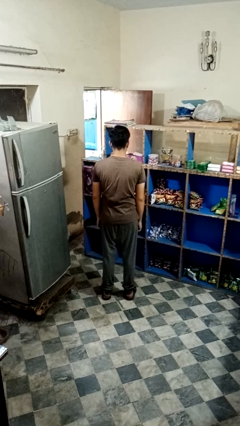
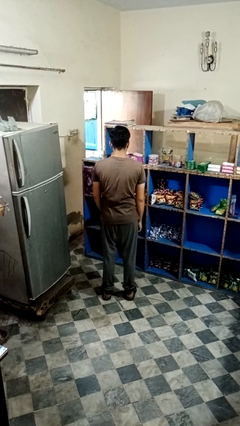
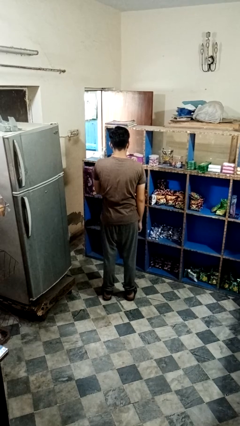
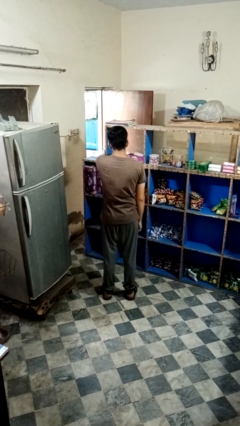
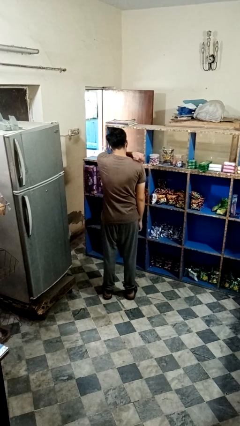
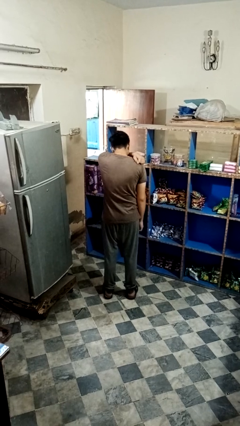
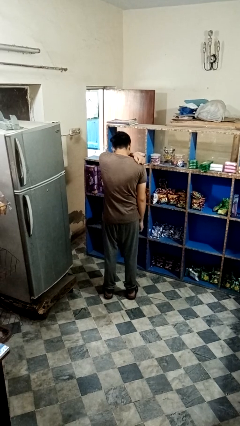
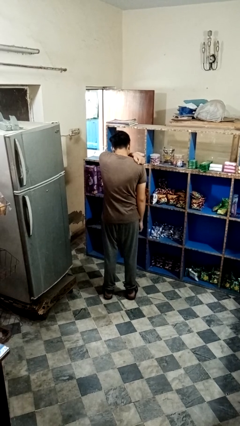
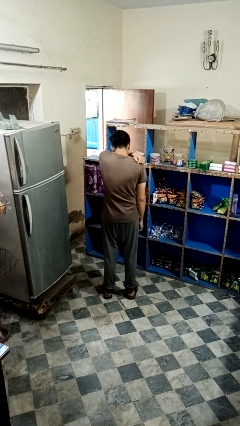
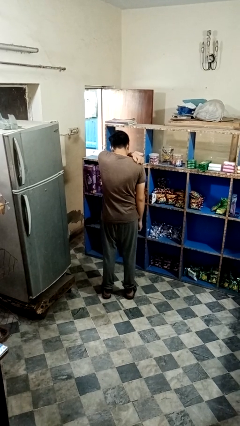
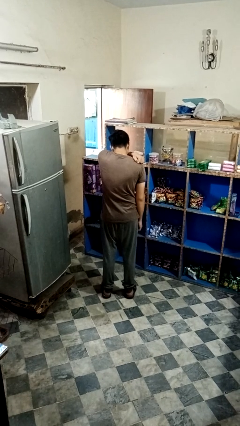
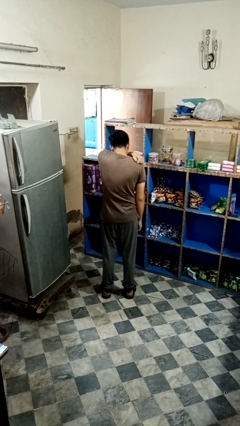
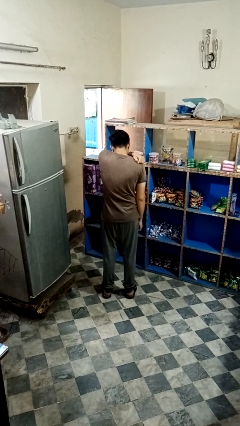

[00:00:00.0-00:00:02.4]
person sneezes into arm

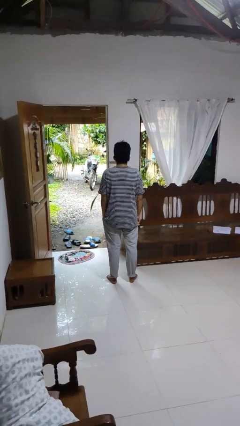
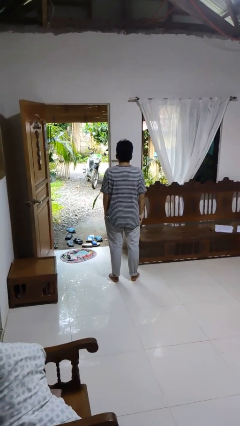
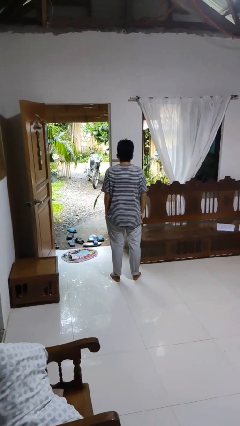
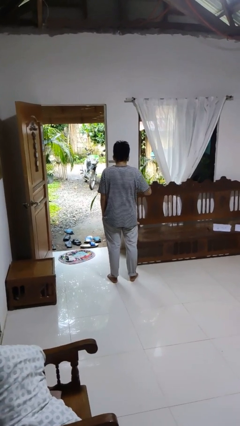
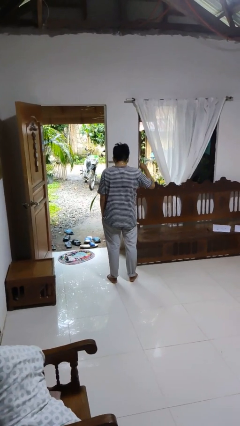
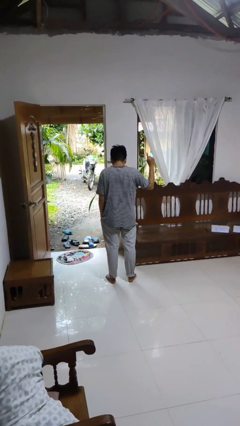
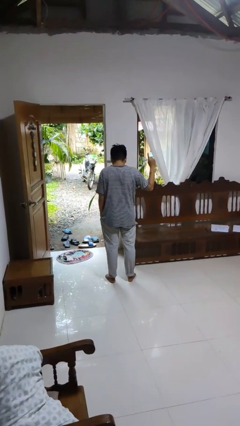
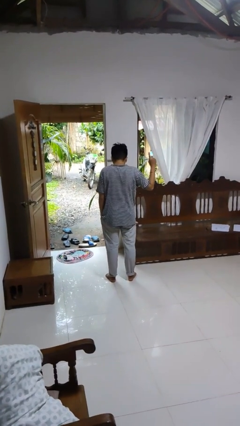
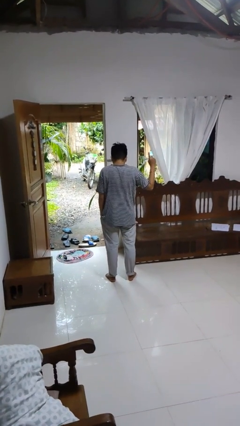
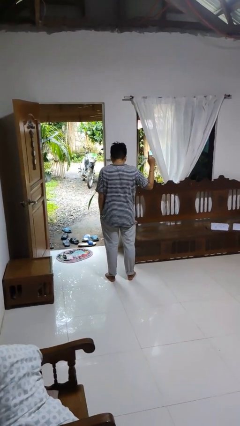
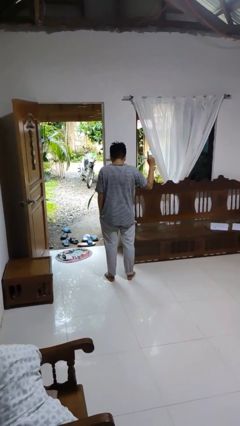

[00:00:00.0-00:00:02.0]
person gestures number one

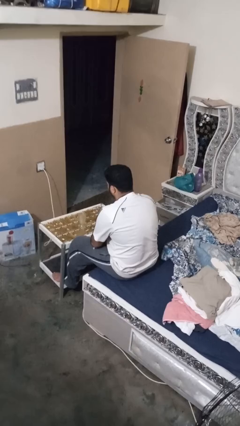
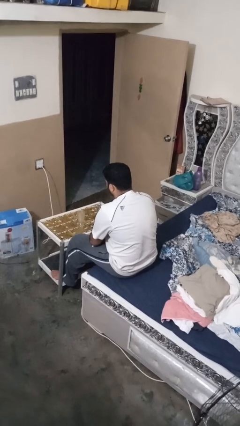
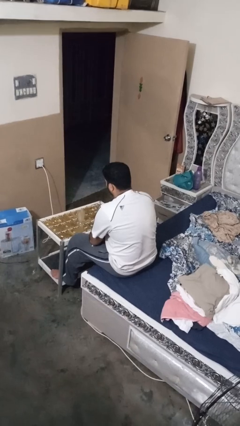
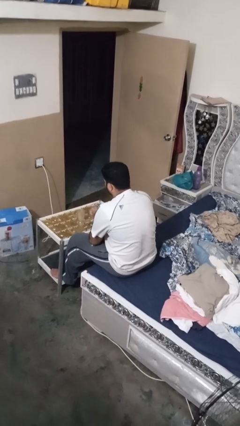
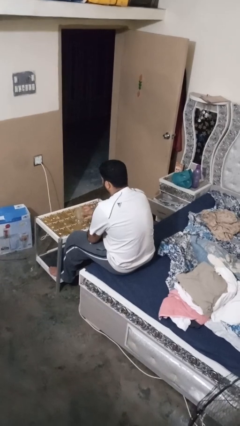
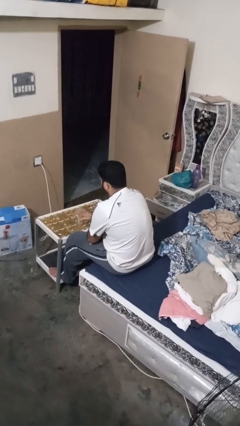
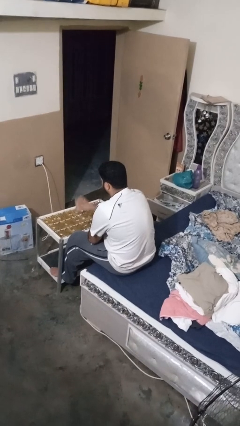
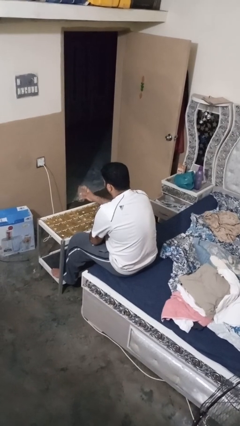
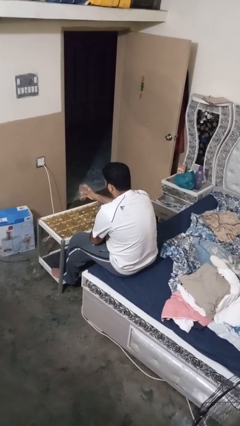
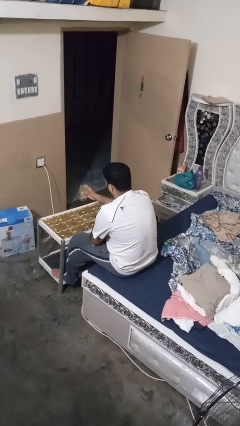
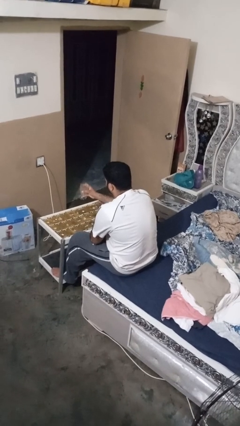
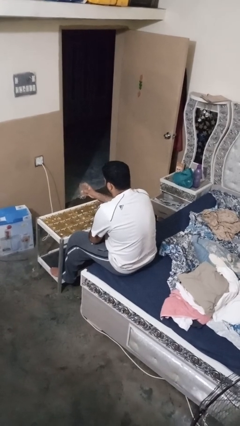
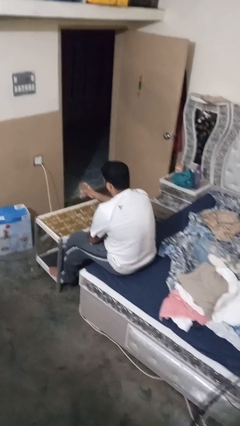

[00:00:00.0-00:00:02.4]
person picks up object from table

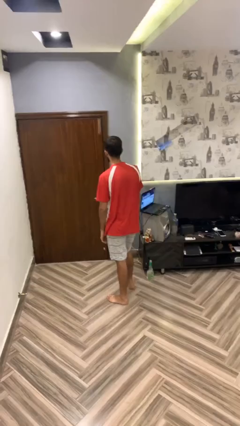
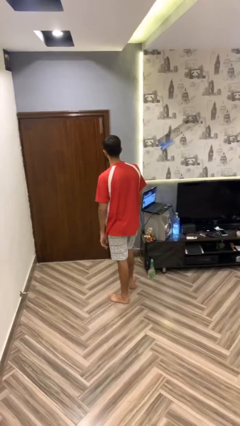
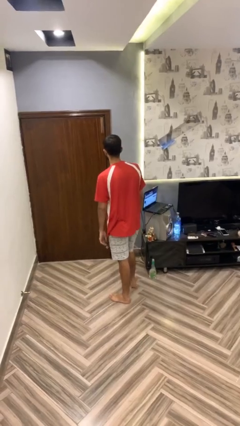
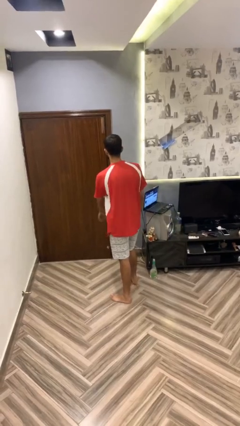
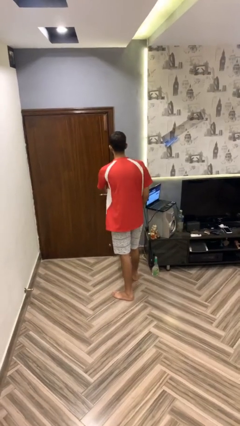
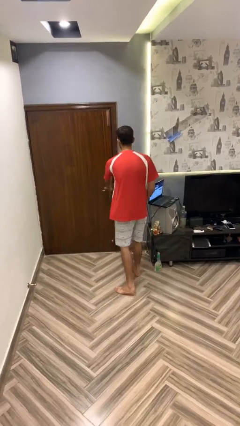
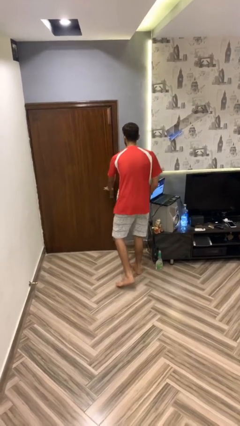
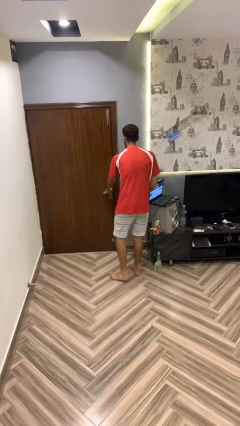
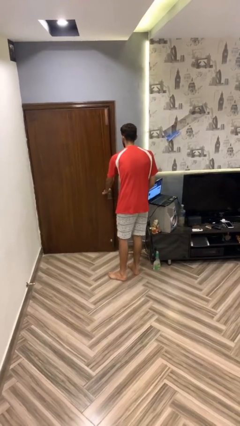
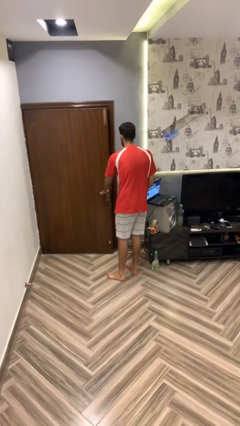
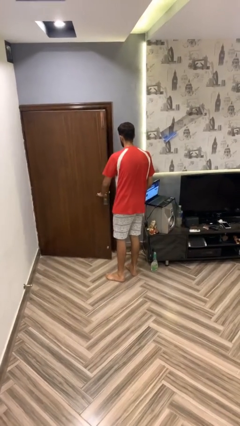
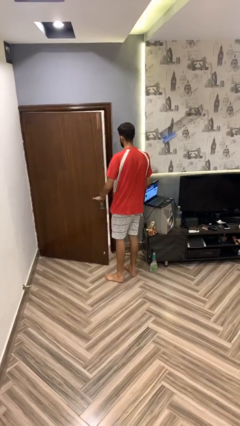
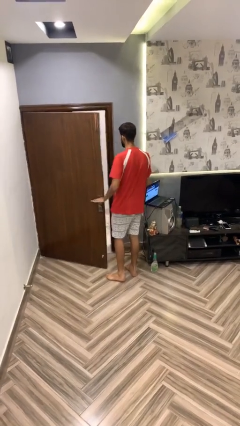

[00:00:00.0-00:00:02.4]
person opens facility door

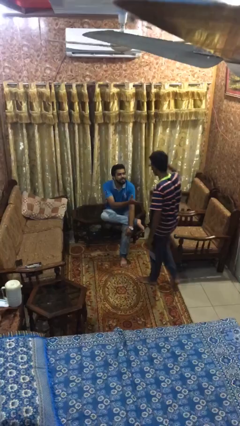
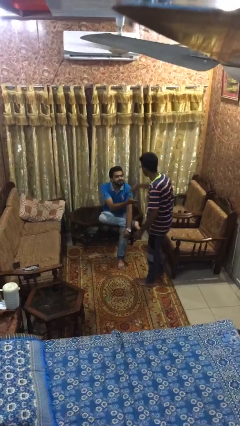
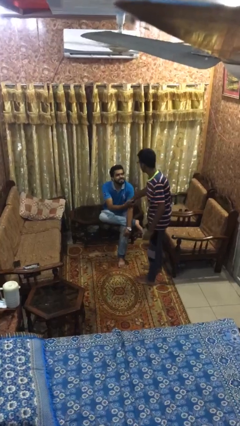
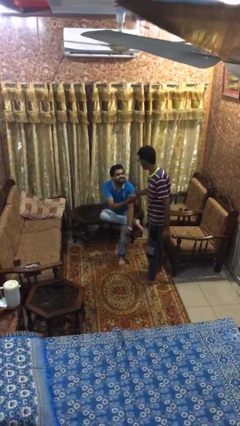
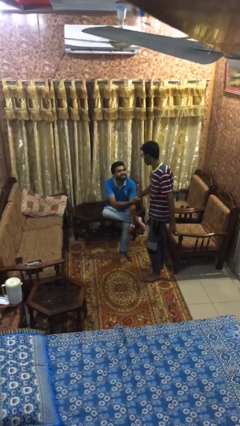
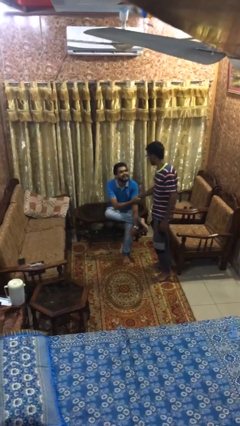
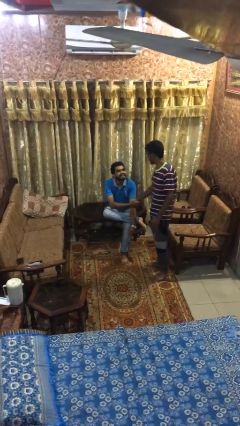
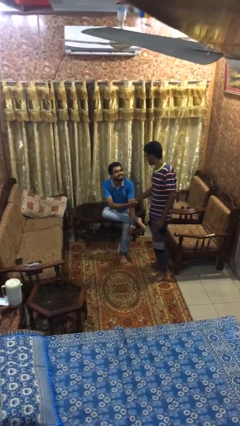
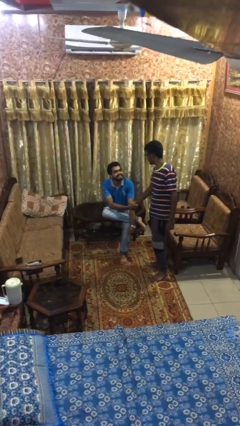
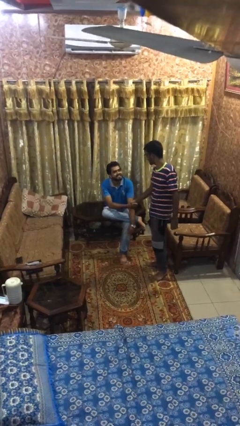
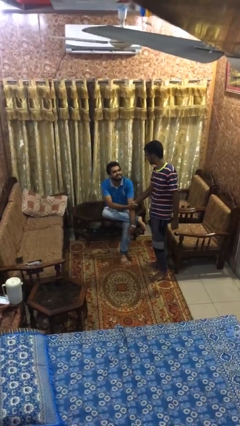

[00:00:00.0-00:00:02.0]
person shakes hand

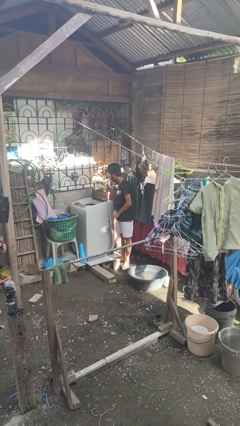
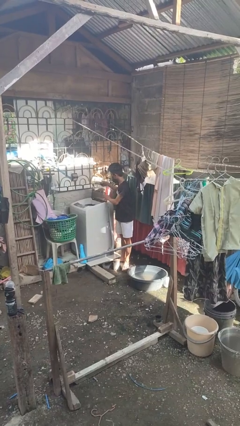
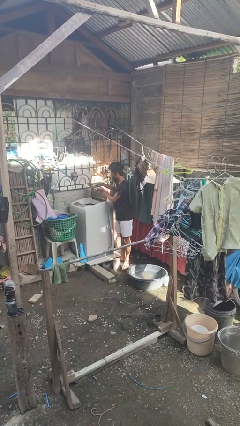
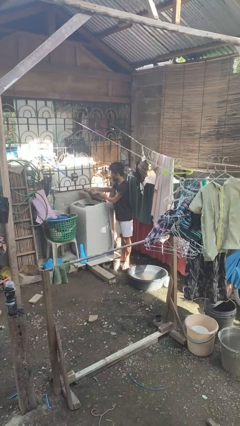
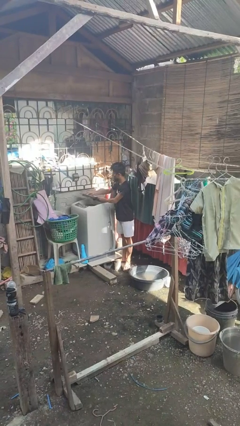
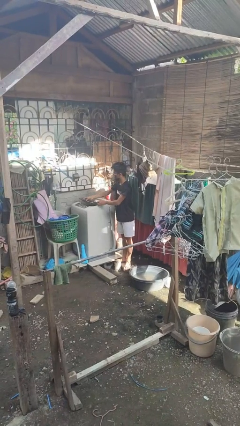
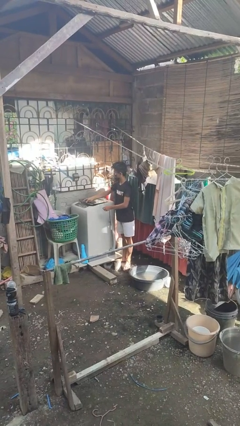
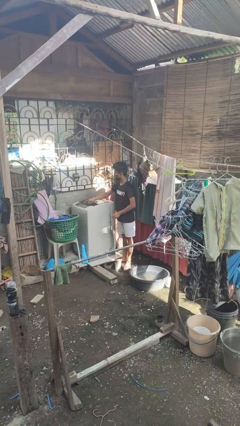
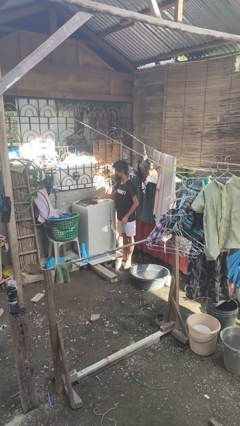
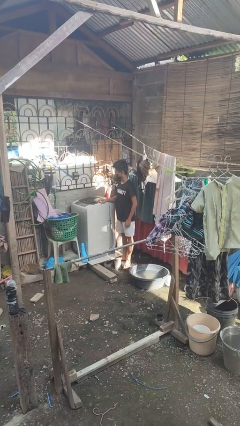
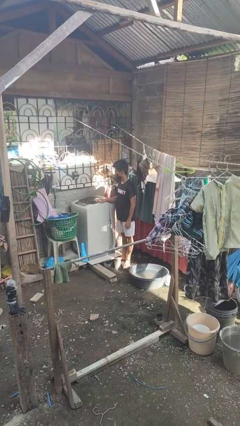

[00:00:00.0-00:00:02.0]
person closes clothes washer

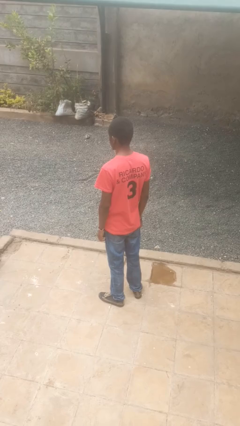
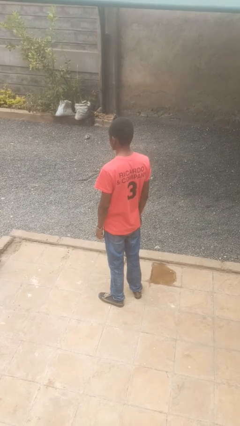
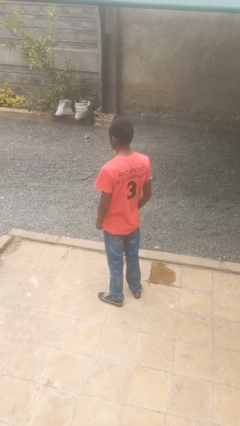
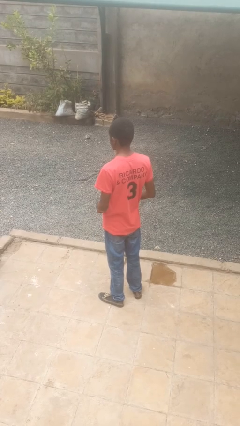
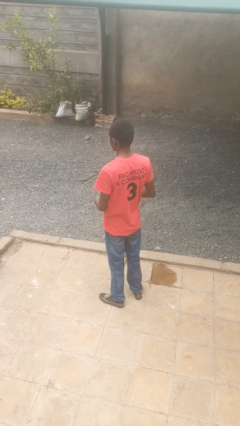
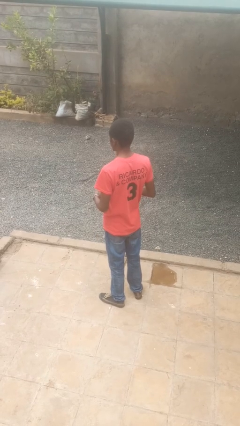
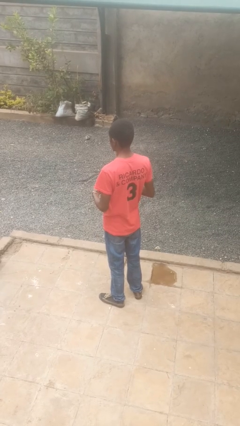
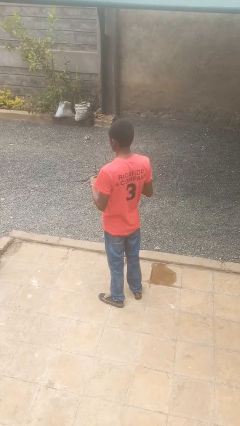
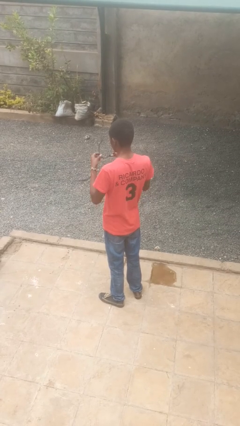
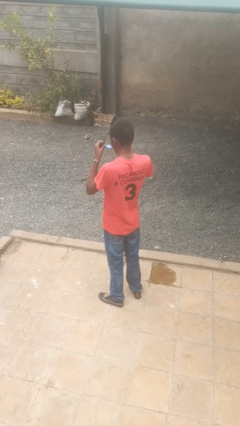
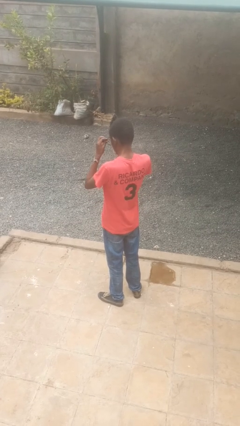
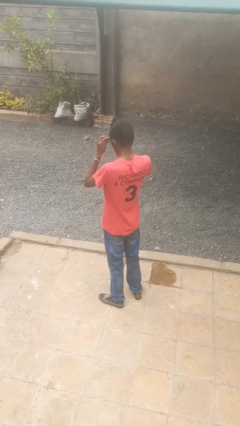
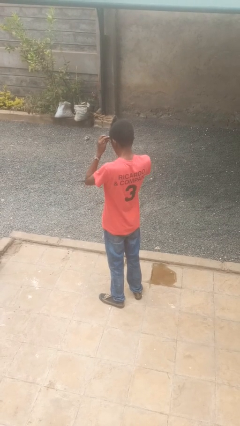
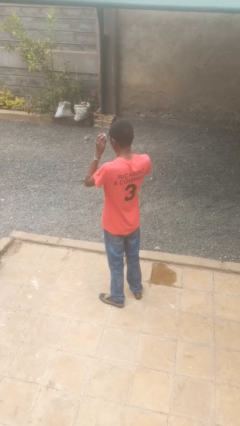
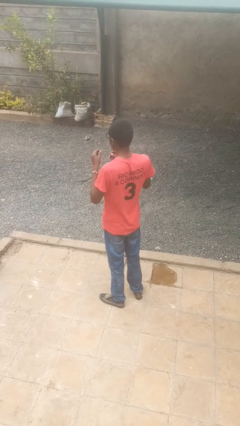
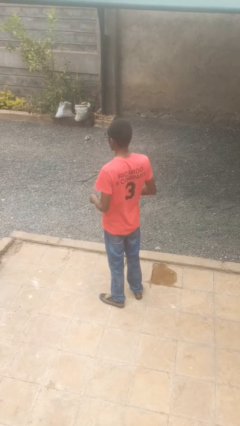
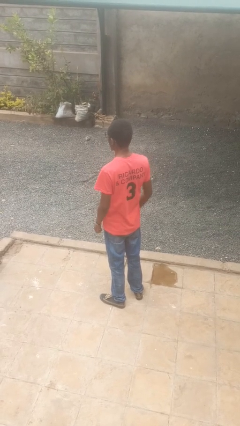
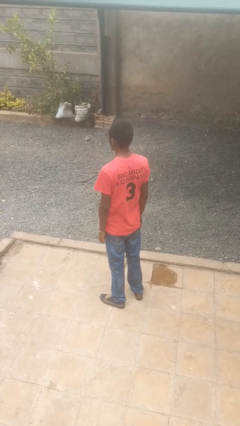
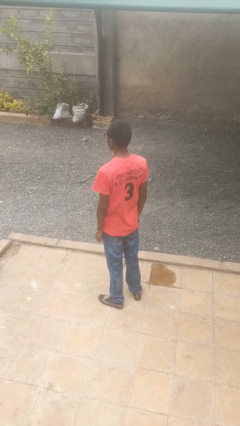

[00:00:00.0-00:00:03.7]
person puts on glasses

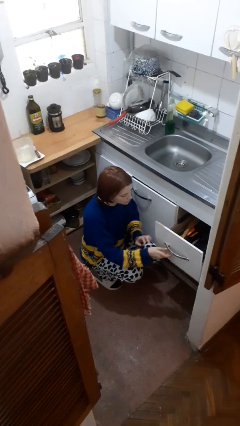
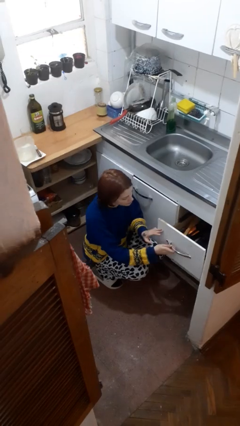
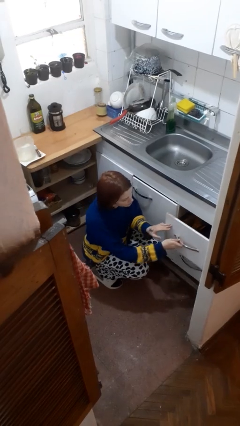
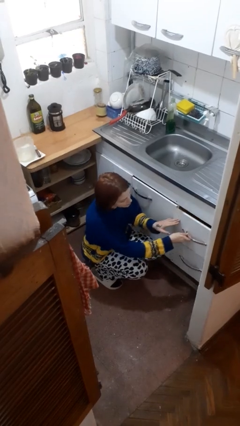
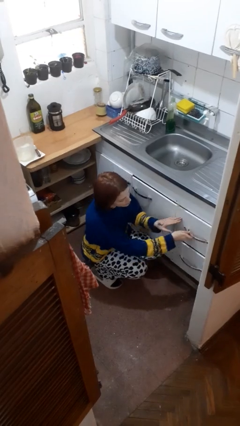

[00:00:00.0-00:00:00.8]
person closes kitchen drawer
